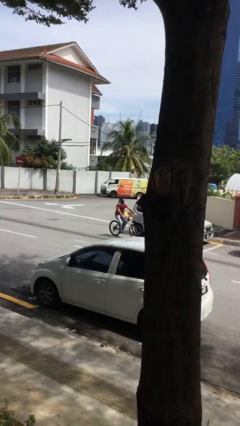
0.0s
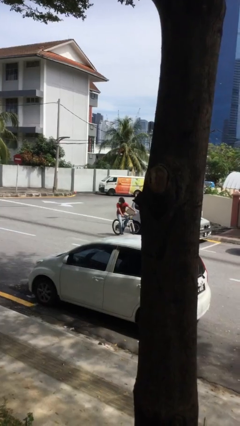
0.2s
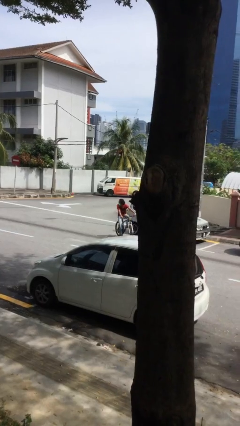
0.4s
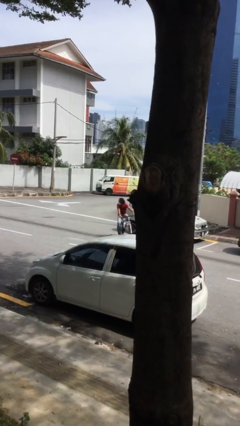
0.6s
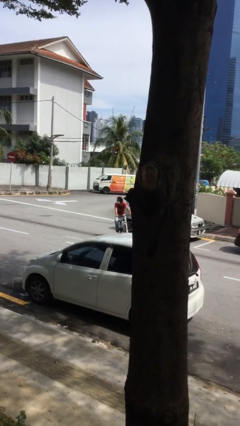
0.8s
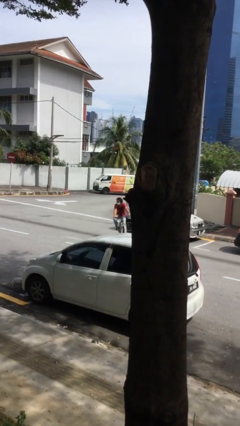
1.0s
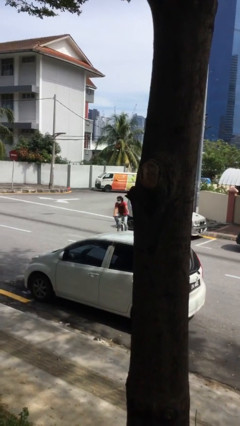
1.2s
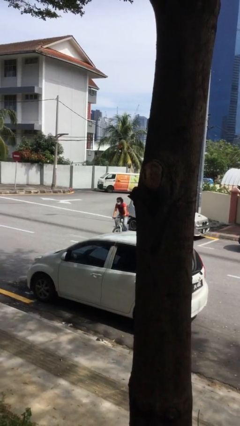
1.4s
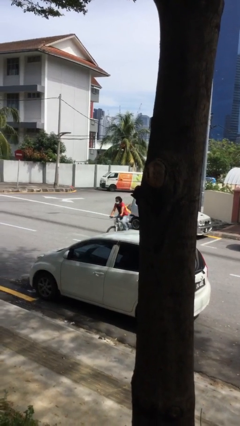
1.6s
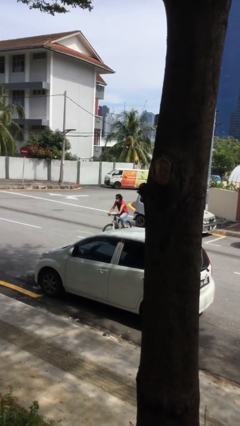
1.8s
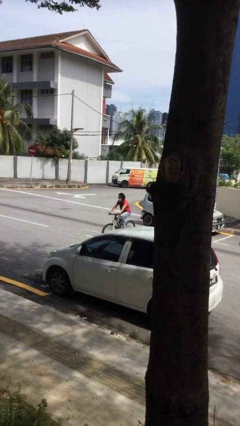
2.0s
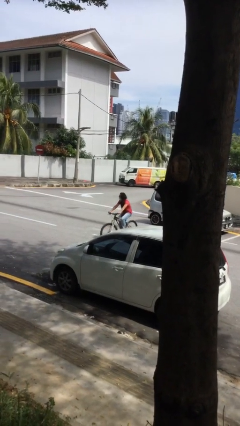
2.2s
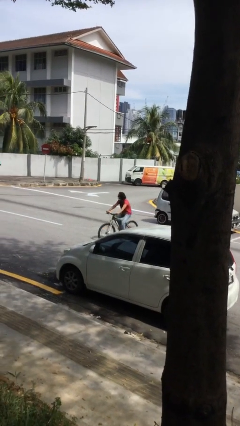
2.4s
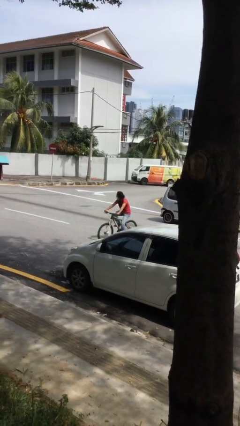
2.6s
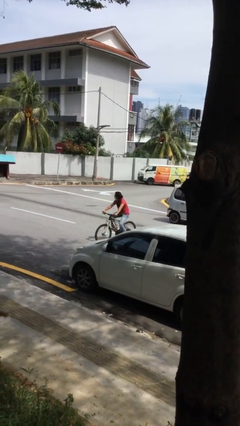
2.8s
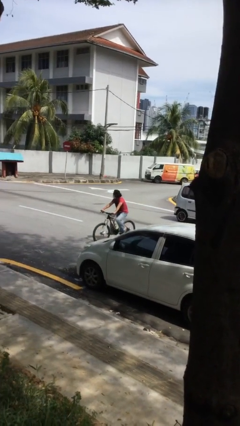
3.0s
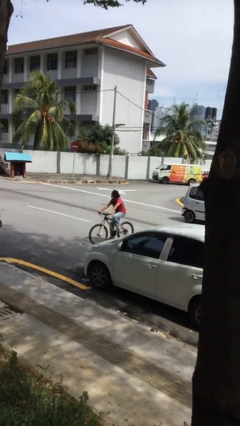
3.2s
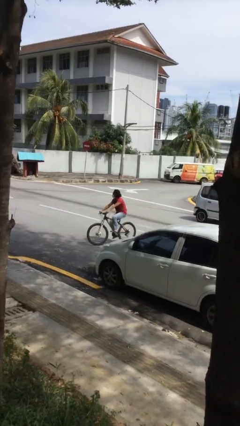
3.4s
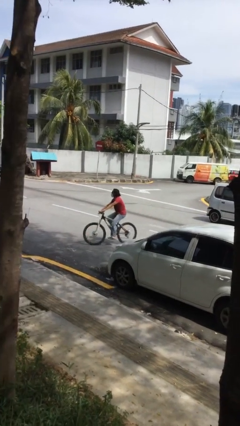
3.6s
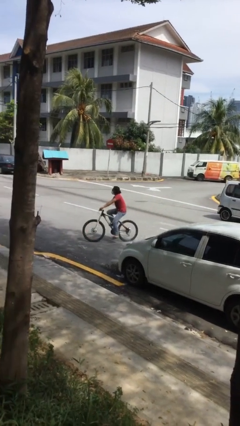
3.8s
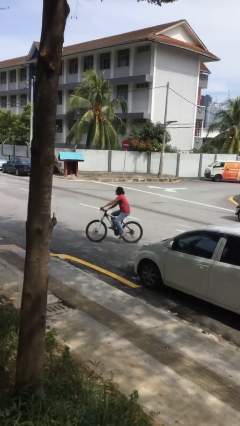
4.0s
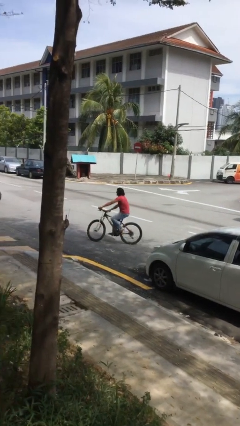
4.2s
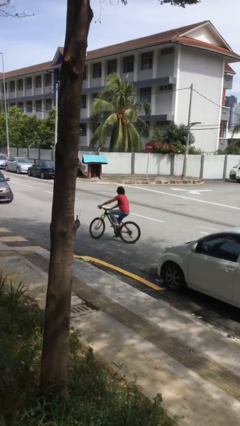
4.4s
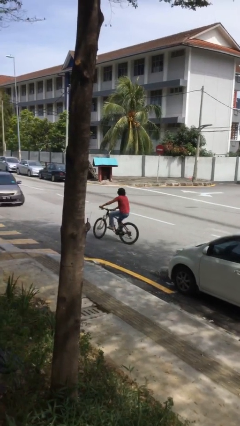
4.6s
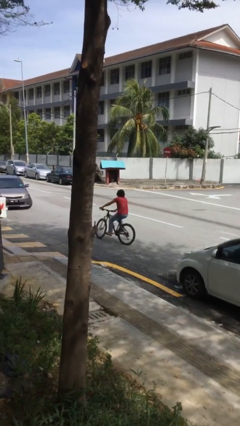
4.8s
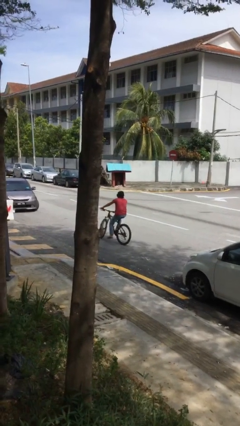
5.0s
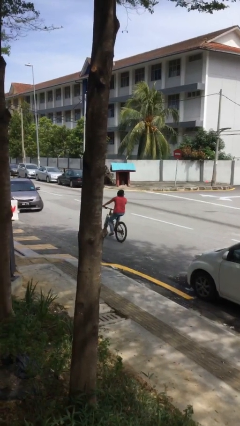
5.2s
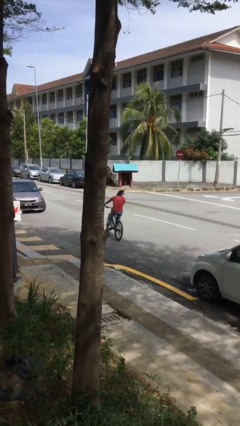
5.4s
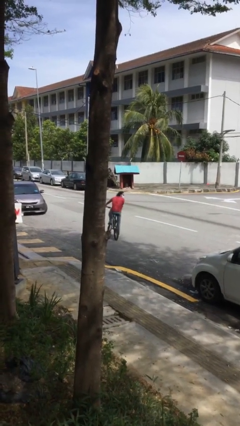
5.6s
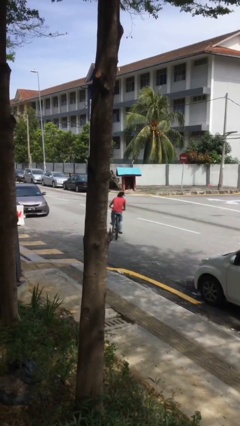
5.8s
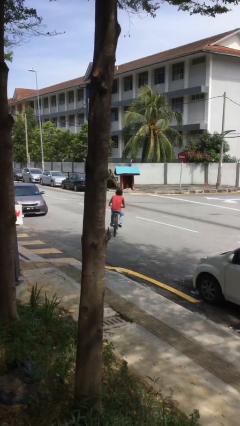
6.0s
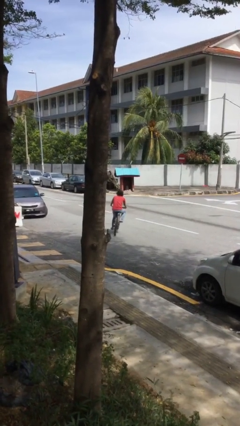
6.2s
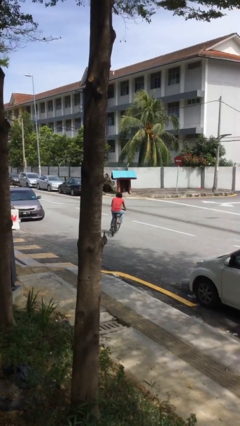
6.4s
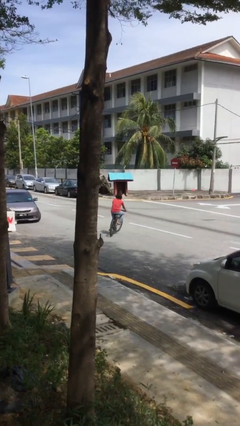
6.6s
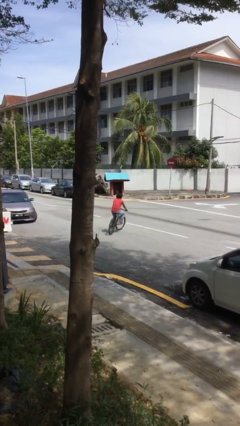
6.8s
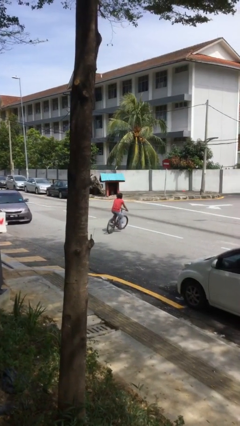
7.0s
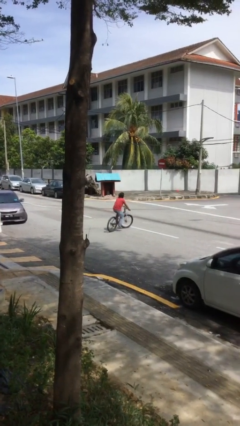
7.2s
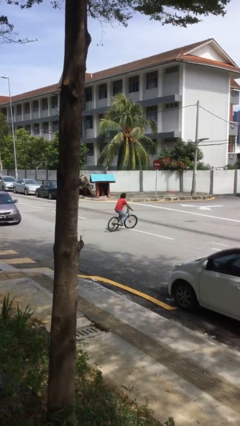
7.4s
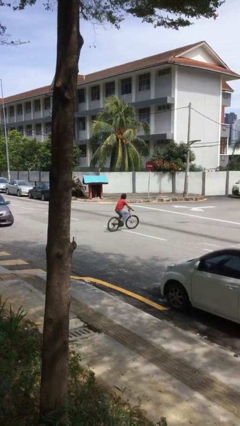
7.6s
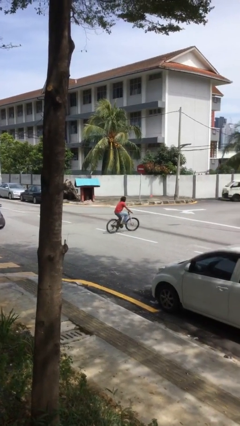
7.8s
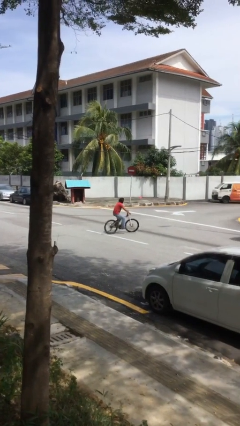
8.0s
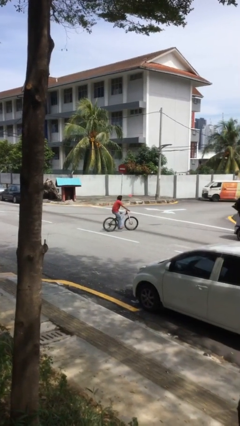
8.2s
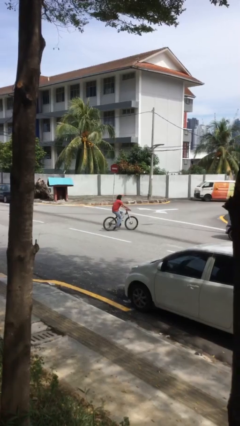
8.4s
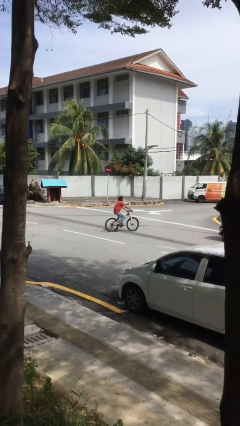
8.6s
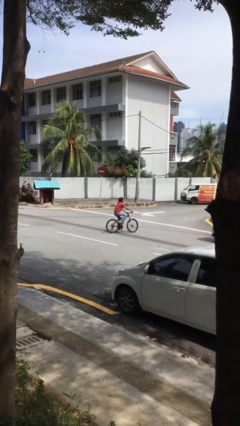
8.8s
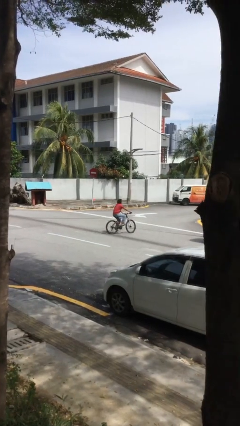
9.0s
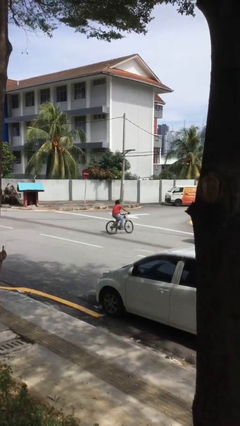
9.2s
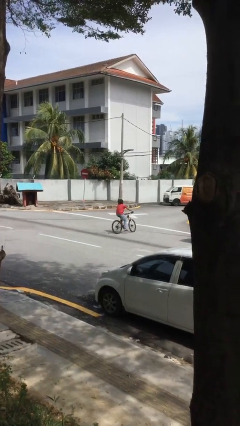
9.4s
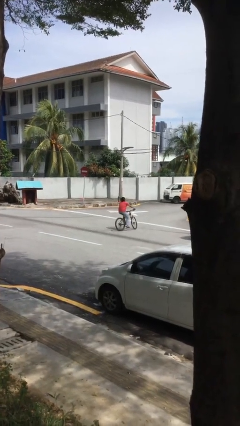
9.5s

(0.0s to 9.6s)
person rides bicycle

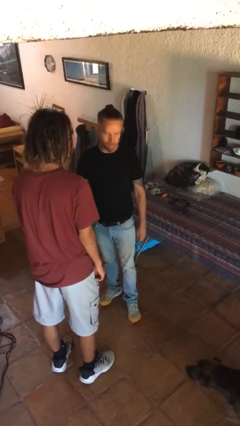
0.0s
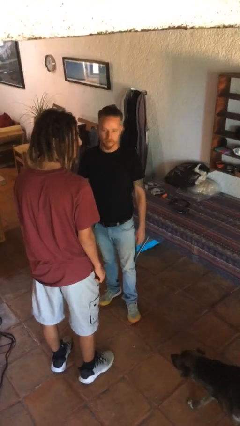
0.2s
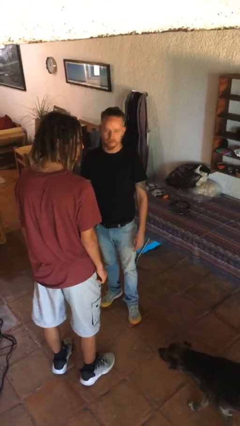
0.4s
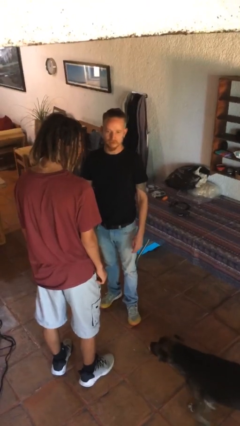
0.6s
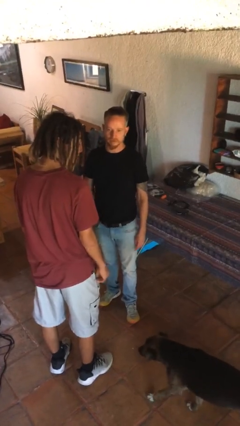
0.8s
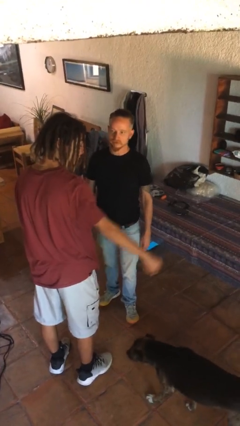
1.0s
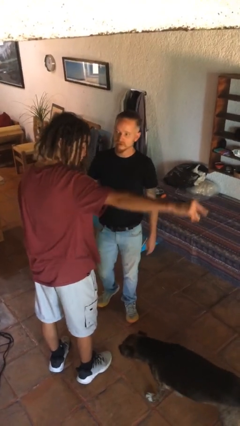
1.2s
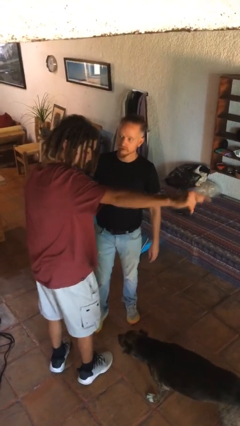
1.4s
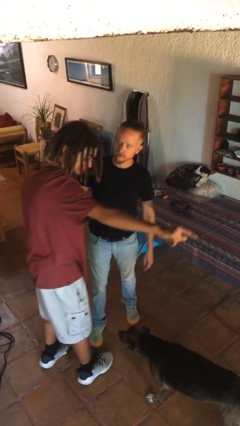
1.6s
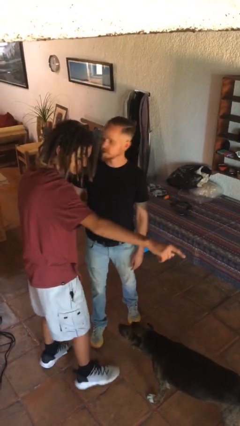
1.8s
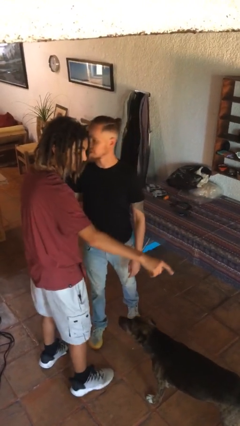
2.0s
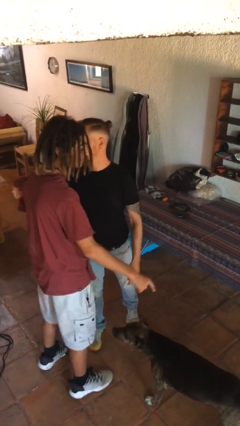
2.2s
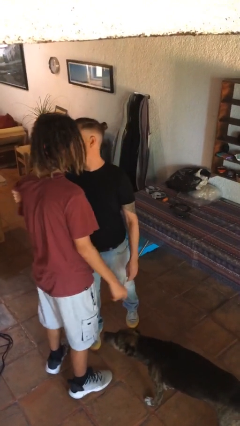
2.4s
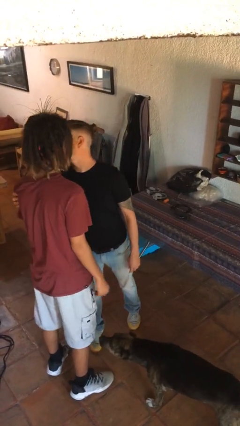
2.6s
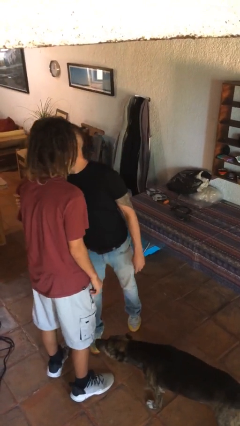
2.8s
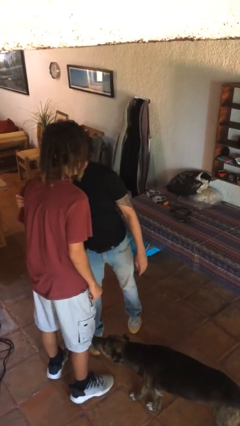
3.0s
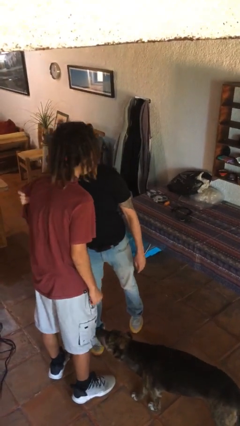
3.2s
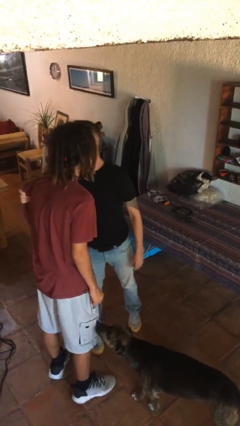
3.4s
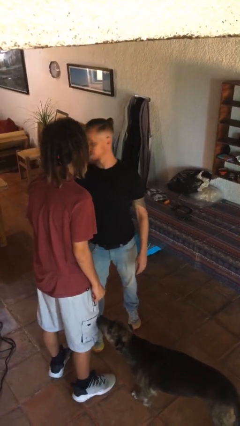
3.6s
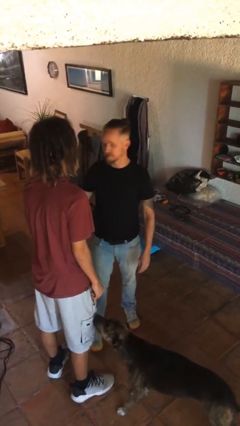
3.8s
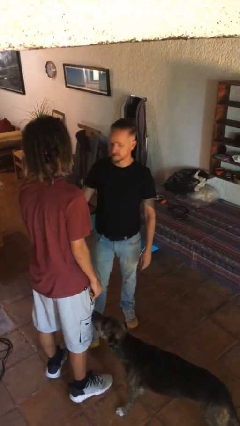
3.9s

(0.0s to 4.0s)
person kisses cheek of person

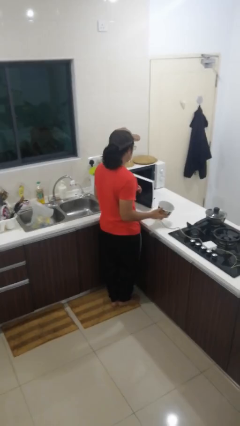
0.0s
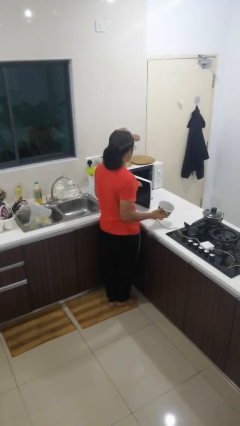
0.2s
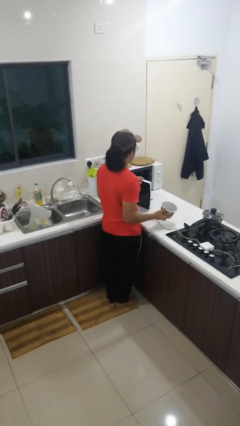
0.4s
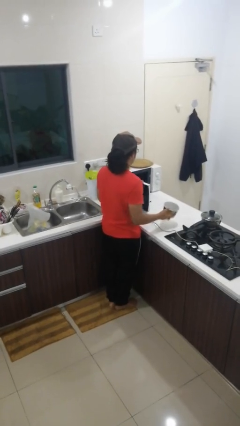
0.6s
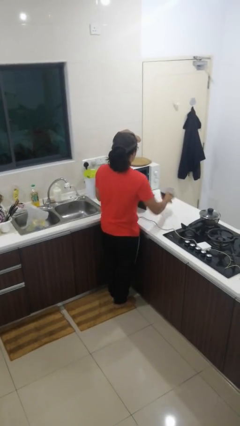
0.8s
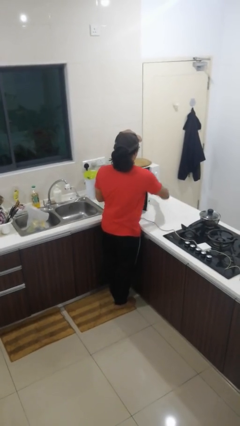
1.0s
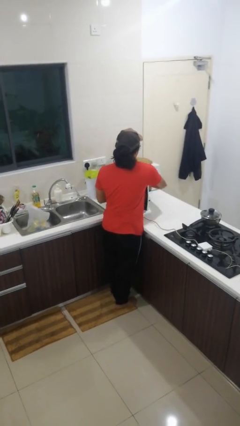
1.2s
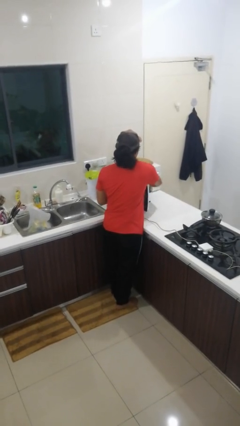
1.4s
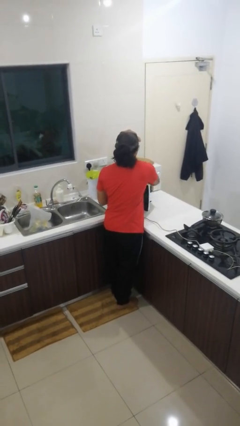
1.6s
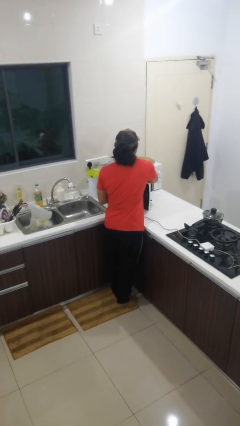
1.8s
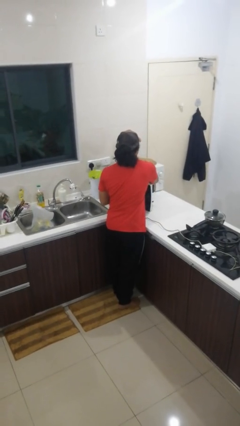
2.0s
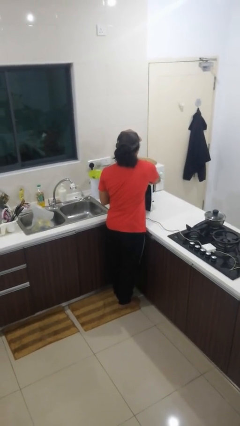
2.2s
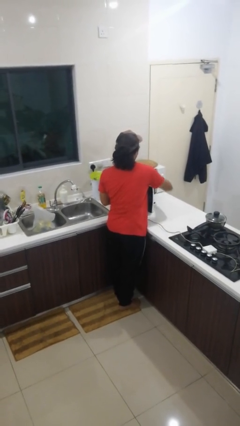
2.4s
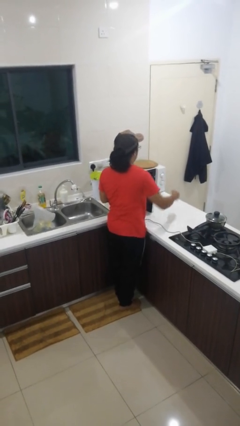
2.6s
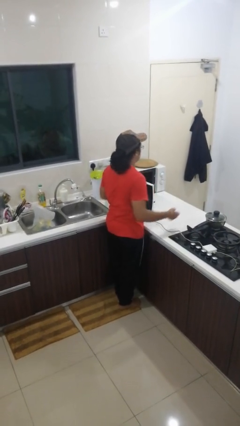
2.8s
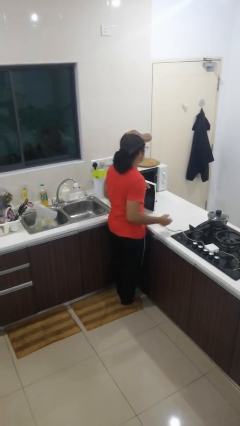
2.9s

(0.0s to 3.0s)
person puts object into microwave
